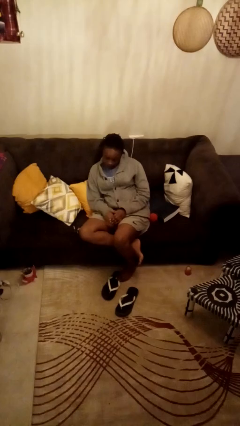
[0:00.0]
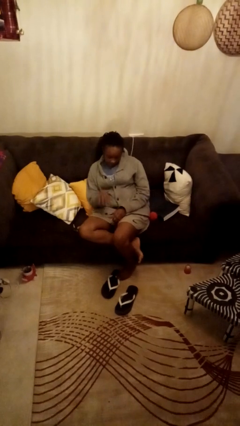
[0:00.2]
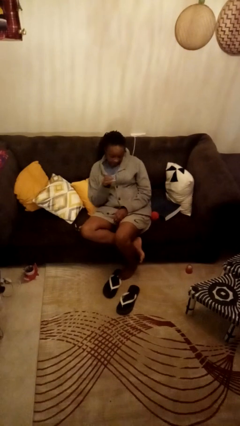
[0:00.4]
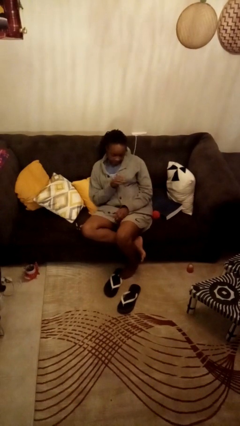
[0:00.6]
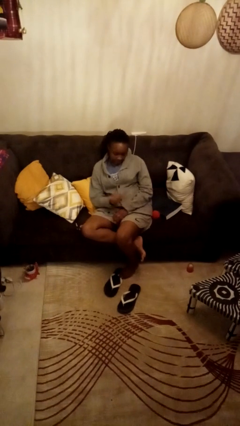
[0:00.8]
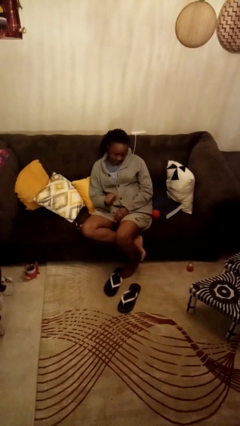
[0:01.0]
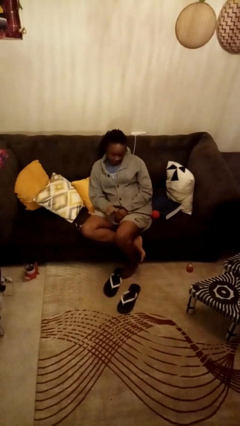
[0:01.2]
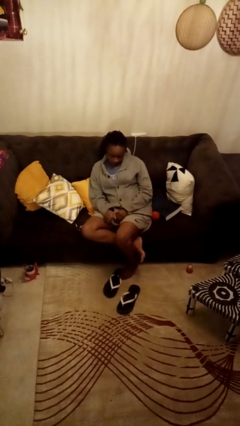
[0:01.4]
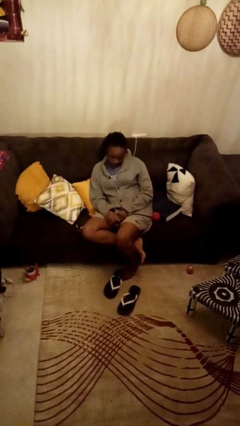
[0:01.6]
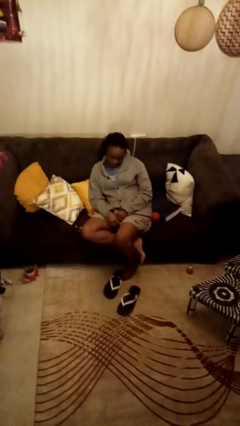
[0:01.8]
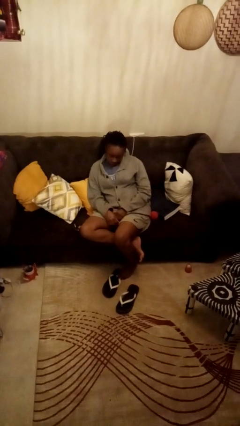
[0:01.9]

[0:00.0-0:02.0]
person swats bug

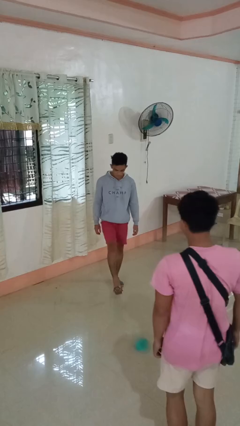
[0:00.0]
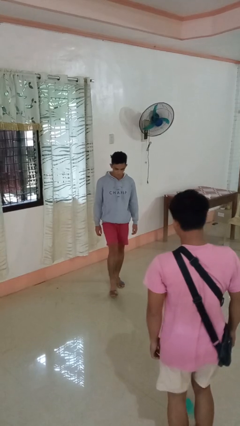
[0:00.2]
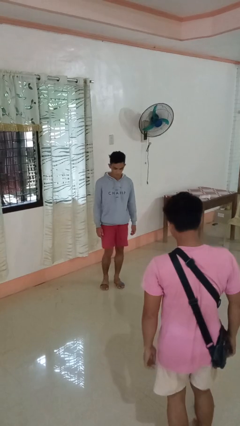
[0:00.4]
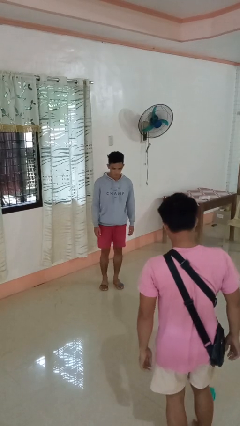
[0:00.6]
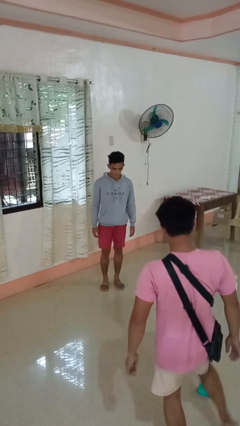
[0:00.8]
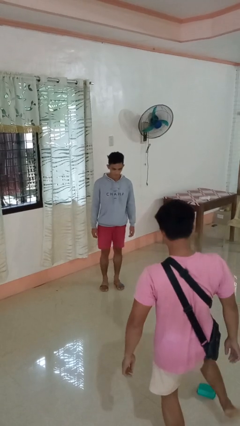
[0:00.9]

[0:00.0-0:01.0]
person kicks object to person

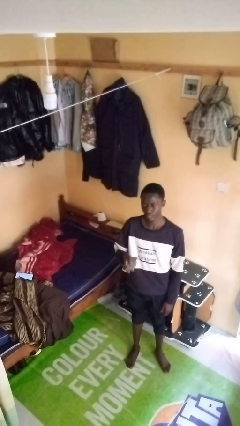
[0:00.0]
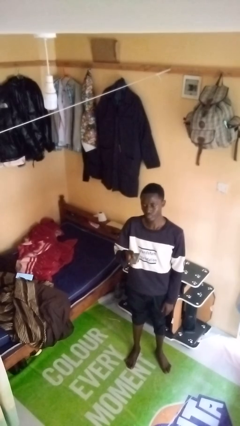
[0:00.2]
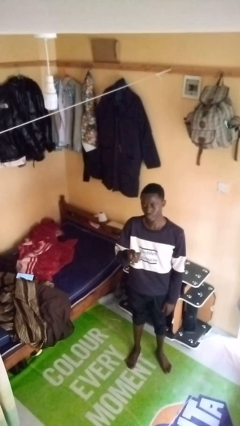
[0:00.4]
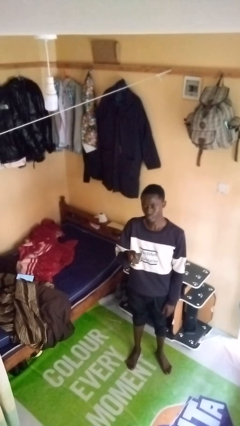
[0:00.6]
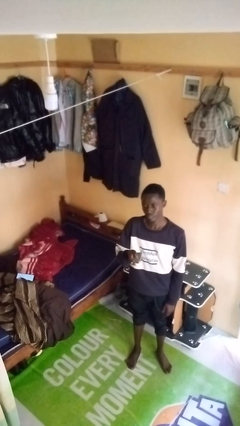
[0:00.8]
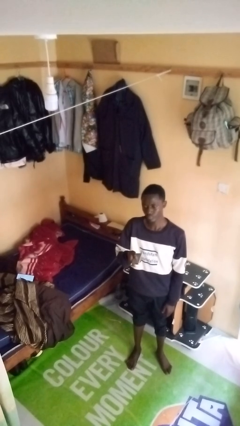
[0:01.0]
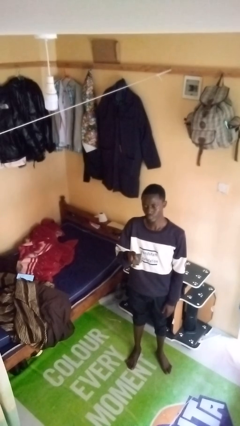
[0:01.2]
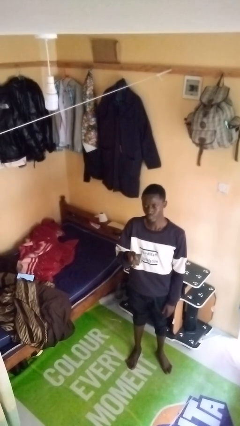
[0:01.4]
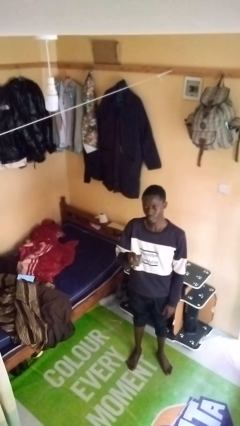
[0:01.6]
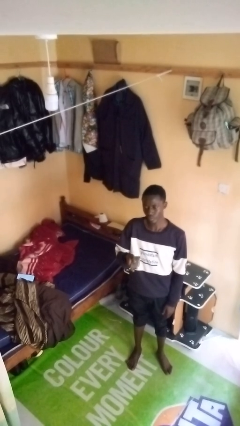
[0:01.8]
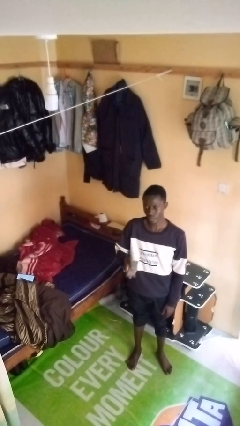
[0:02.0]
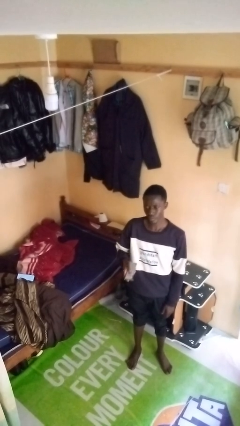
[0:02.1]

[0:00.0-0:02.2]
person uses television remote

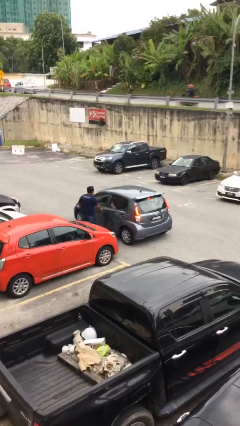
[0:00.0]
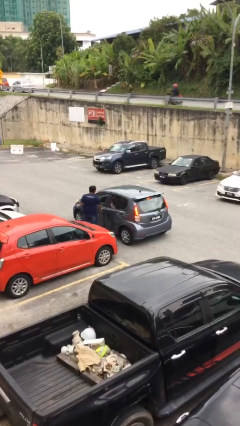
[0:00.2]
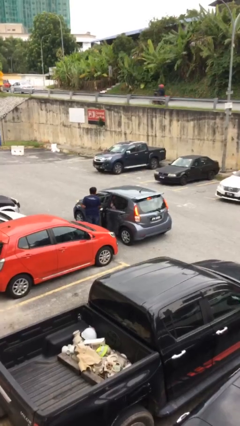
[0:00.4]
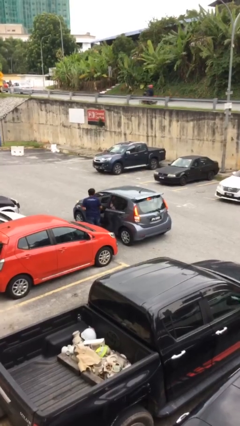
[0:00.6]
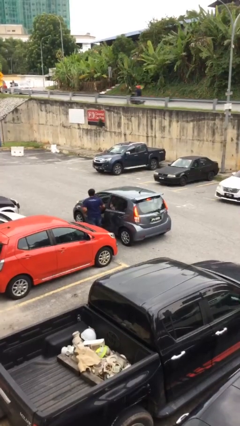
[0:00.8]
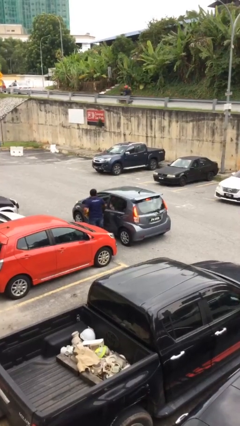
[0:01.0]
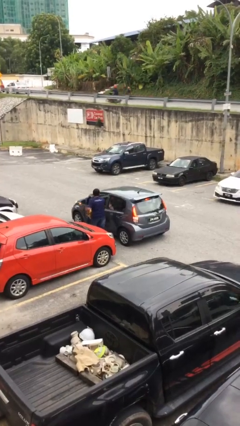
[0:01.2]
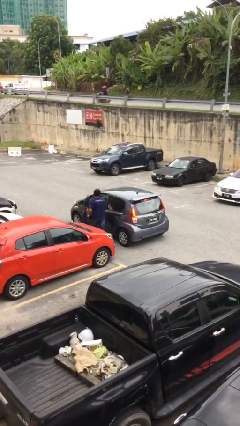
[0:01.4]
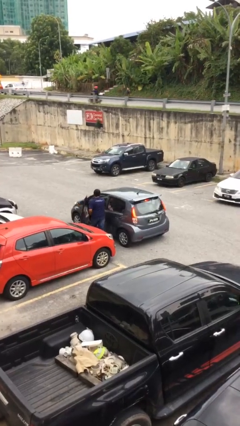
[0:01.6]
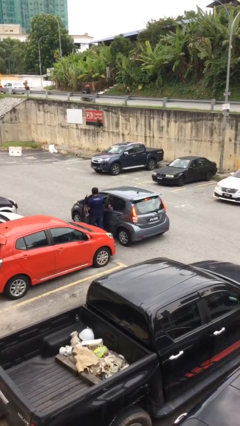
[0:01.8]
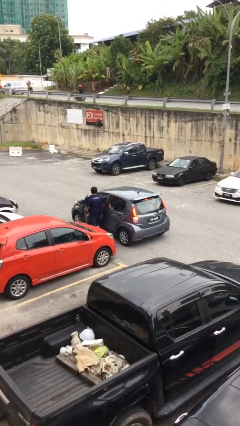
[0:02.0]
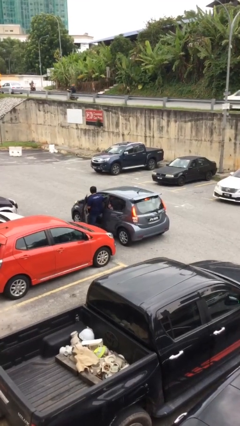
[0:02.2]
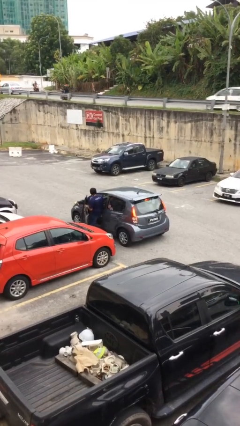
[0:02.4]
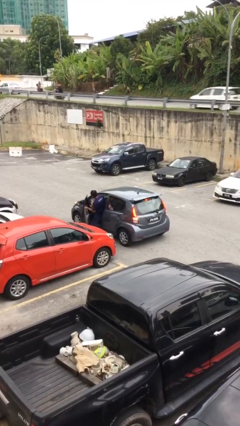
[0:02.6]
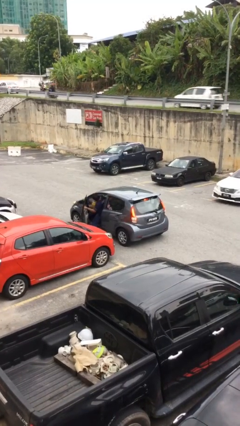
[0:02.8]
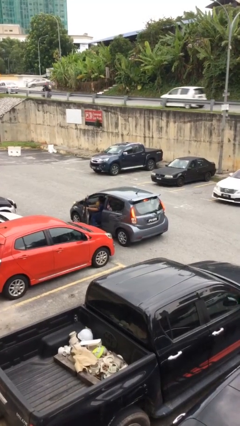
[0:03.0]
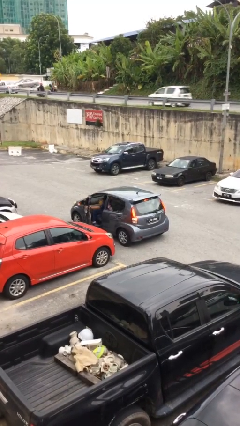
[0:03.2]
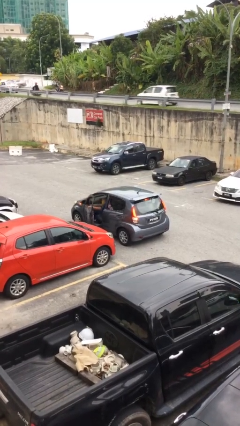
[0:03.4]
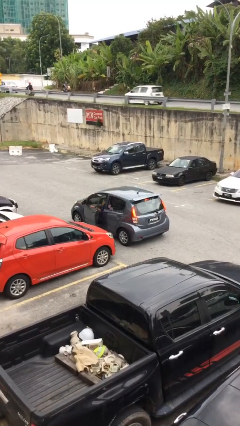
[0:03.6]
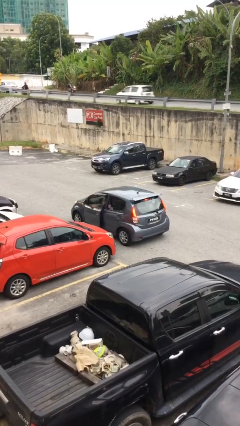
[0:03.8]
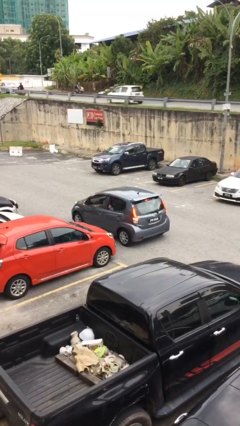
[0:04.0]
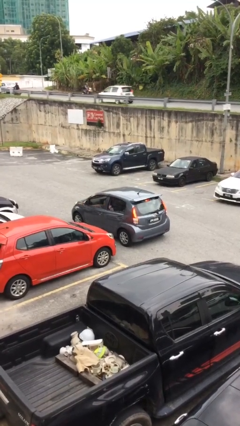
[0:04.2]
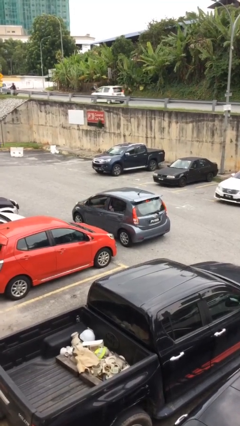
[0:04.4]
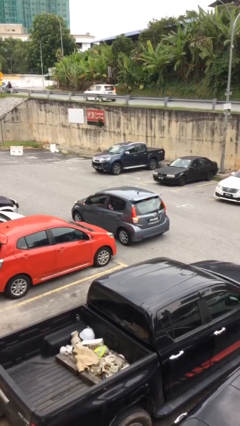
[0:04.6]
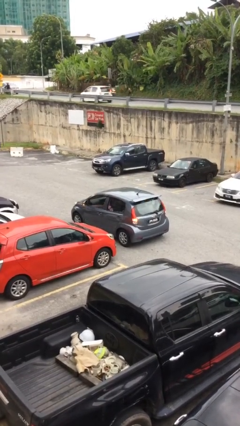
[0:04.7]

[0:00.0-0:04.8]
car picks up person

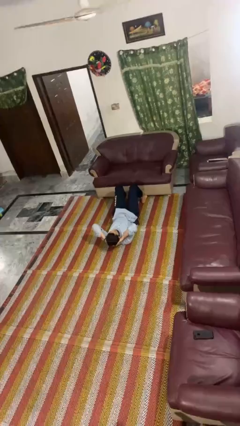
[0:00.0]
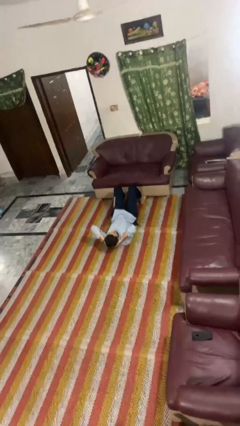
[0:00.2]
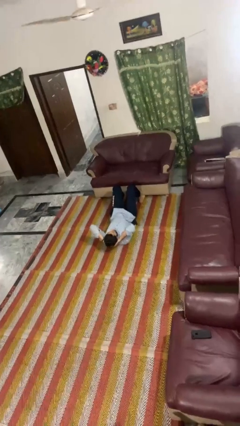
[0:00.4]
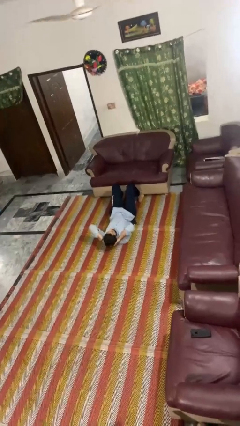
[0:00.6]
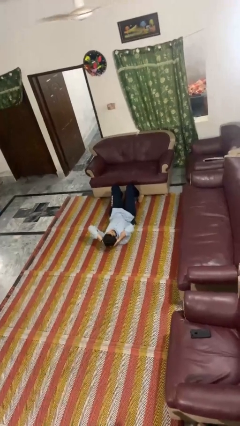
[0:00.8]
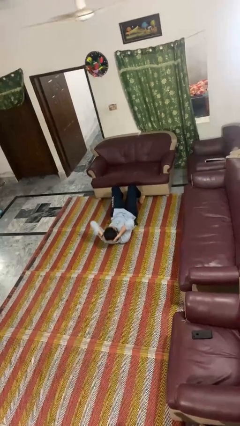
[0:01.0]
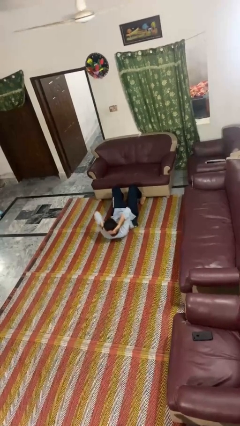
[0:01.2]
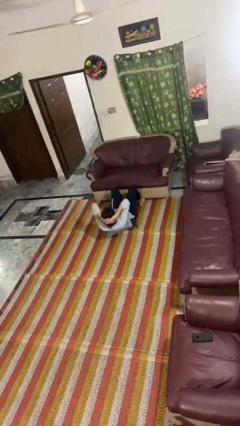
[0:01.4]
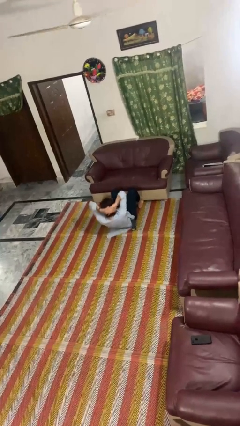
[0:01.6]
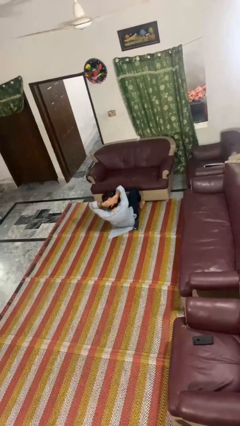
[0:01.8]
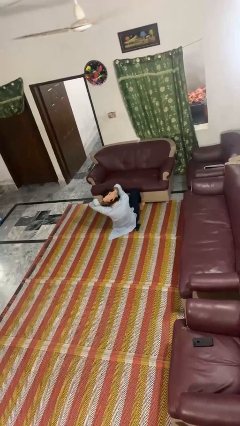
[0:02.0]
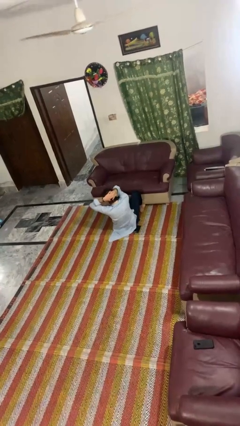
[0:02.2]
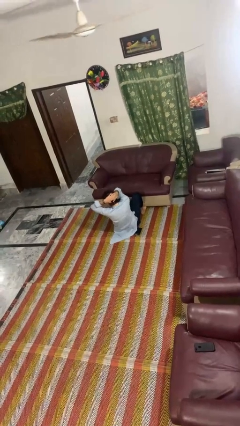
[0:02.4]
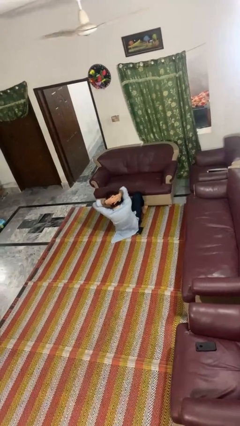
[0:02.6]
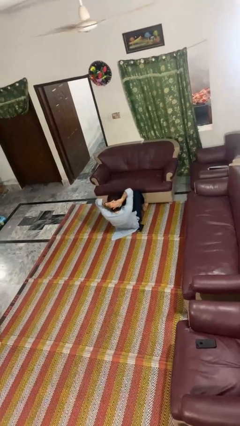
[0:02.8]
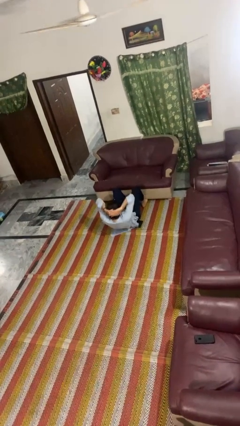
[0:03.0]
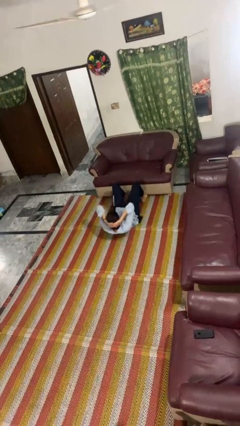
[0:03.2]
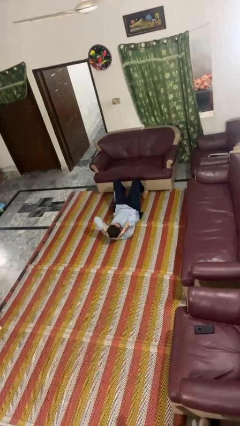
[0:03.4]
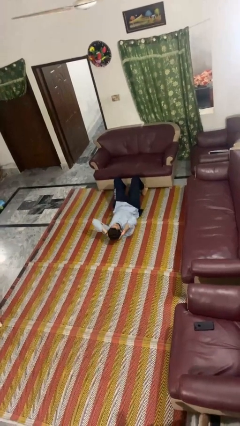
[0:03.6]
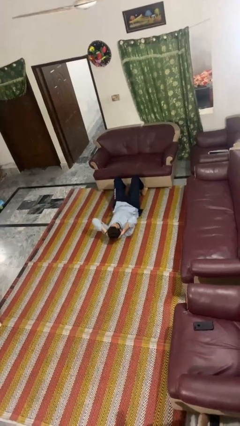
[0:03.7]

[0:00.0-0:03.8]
person exercises with situp

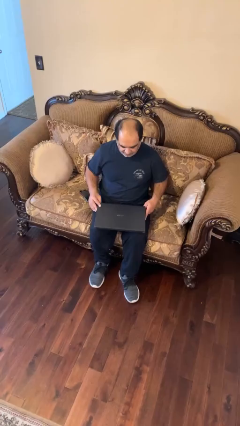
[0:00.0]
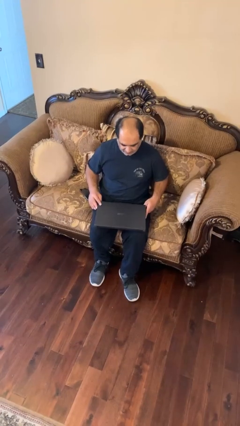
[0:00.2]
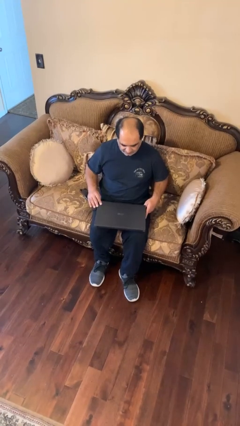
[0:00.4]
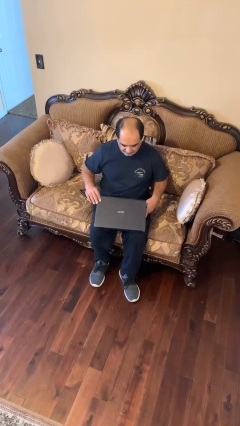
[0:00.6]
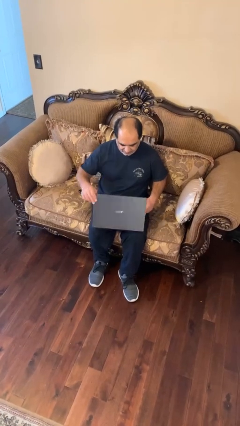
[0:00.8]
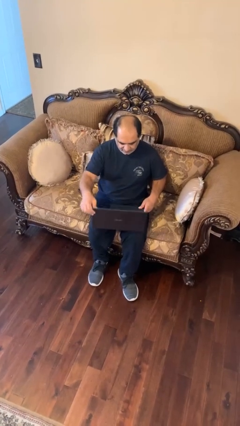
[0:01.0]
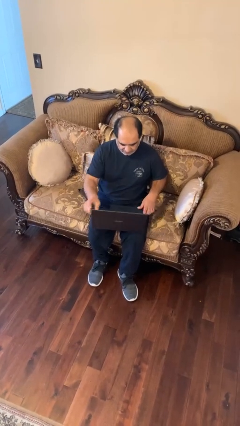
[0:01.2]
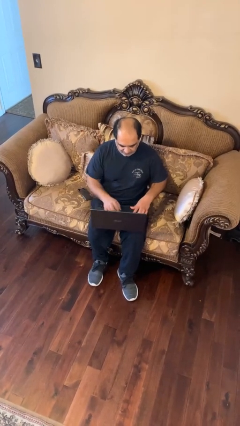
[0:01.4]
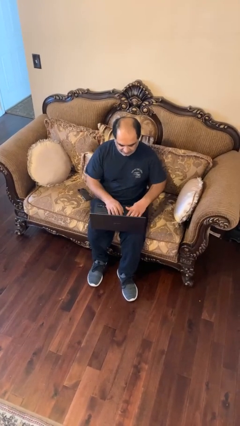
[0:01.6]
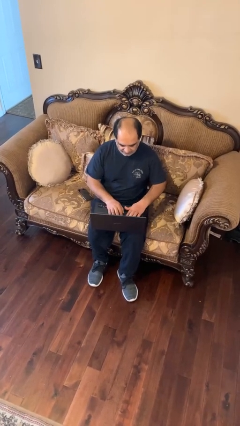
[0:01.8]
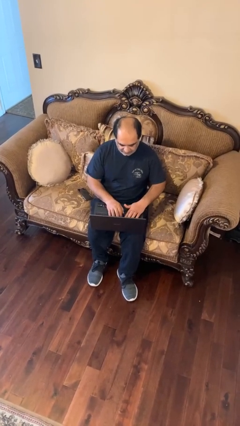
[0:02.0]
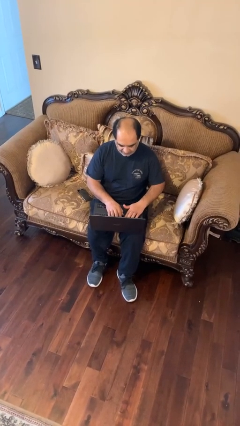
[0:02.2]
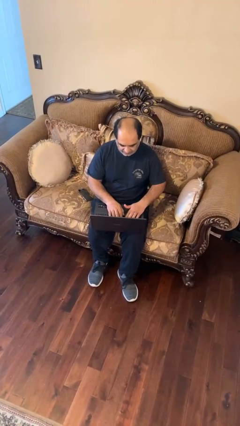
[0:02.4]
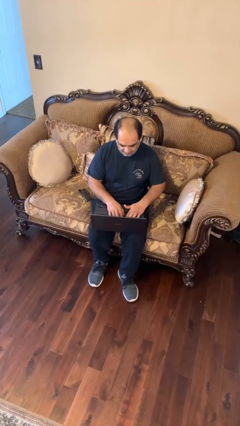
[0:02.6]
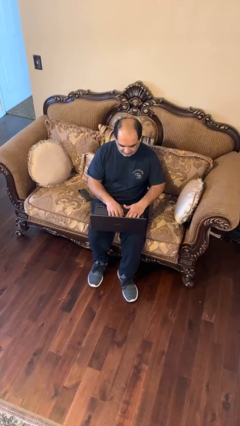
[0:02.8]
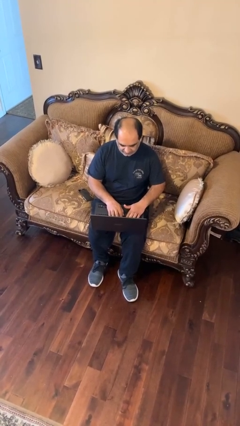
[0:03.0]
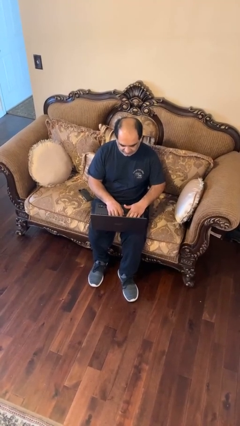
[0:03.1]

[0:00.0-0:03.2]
person interacts with laptop

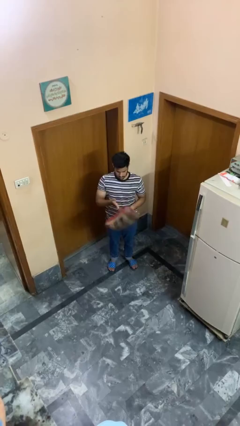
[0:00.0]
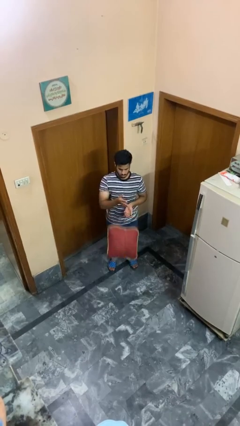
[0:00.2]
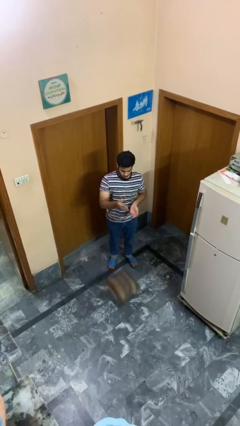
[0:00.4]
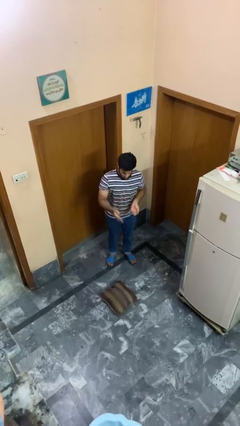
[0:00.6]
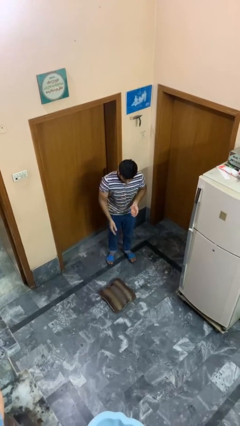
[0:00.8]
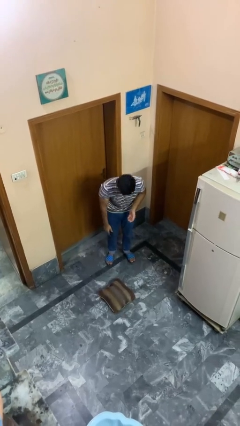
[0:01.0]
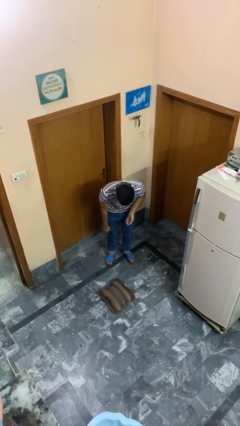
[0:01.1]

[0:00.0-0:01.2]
person drops object
